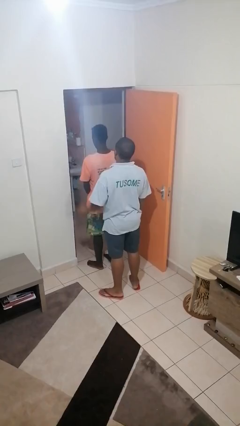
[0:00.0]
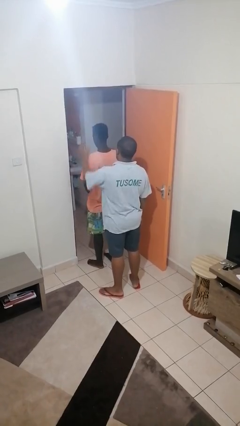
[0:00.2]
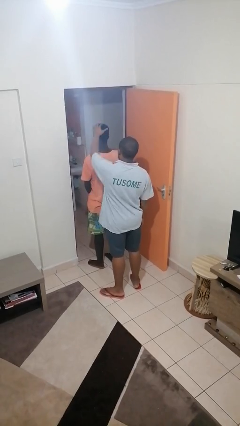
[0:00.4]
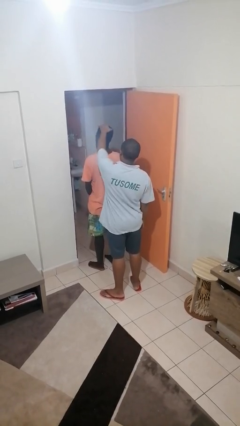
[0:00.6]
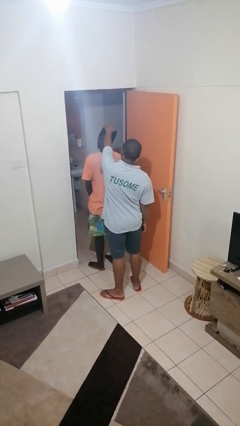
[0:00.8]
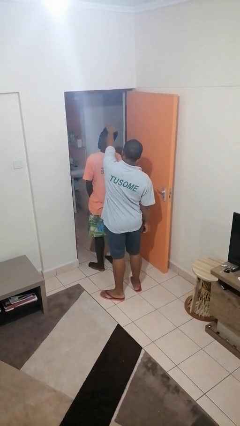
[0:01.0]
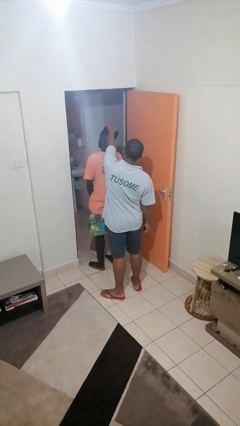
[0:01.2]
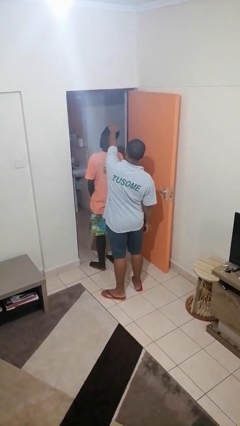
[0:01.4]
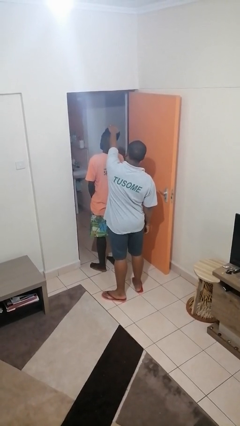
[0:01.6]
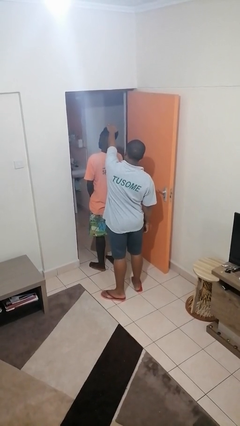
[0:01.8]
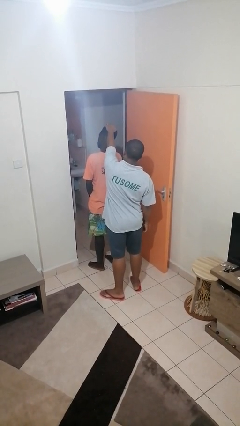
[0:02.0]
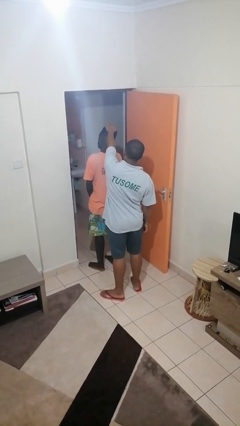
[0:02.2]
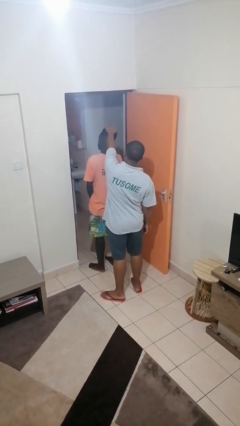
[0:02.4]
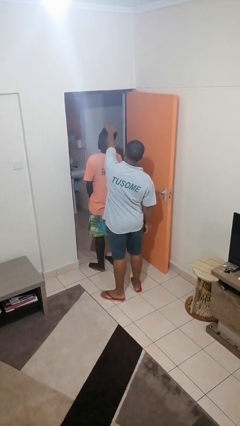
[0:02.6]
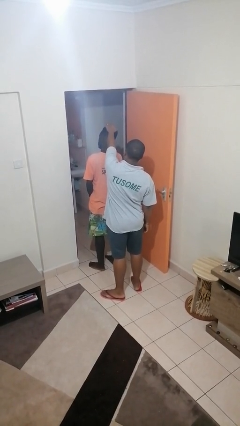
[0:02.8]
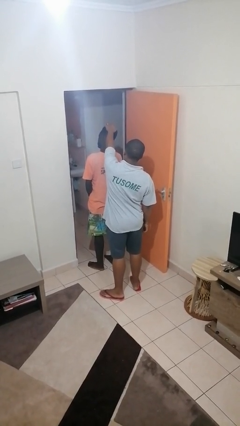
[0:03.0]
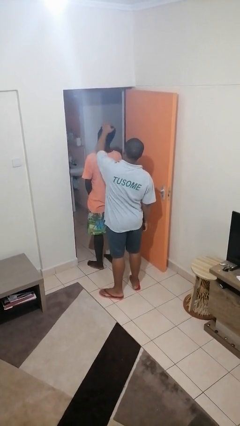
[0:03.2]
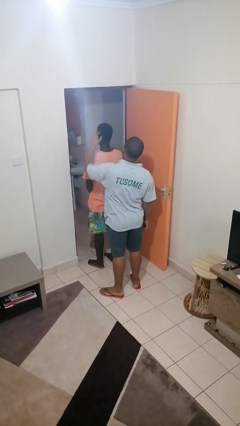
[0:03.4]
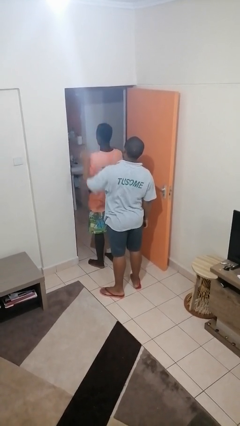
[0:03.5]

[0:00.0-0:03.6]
person grabs person by hair

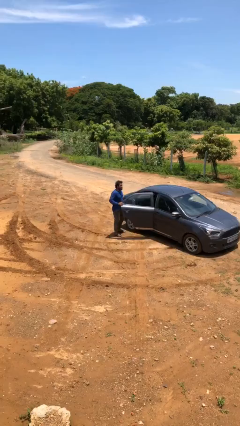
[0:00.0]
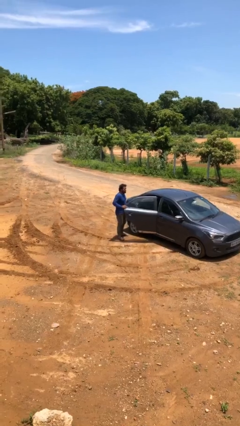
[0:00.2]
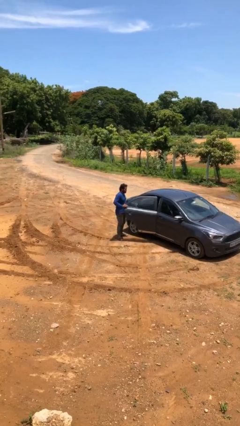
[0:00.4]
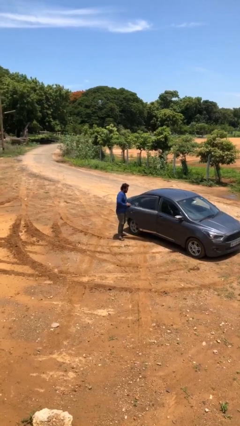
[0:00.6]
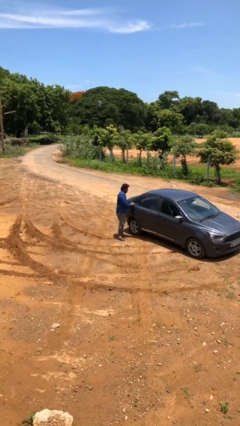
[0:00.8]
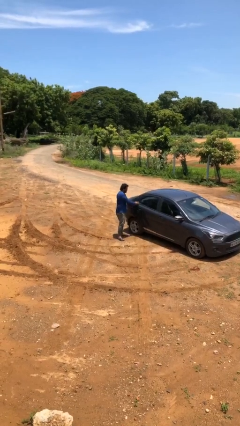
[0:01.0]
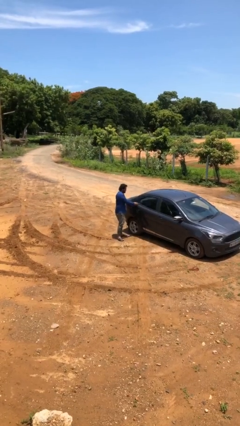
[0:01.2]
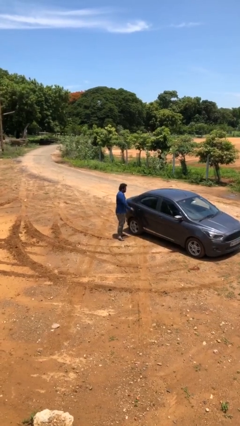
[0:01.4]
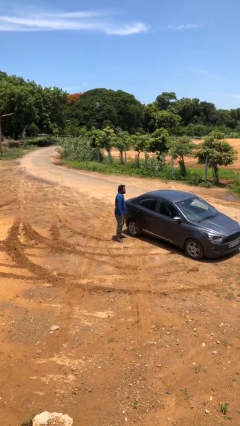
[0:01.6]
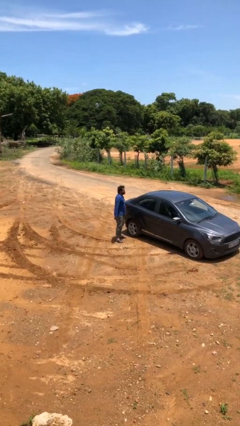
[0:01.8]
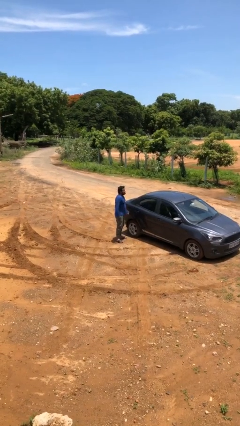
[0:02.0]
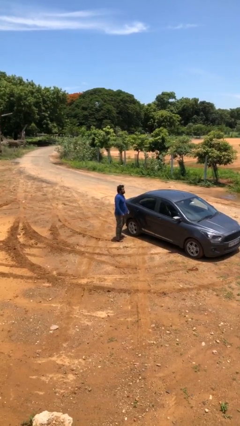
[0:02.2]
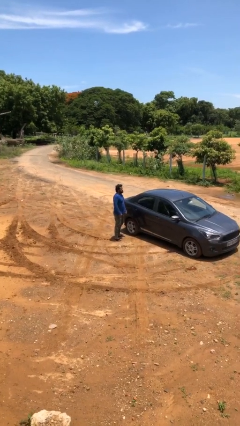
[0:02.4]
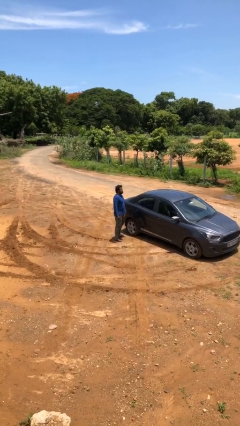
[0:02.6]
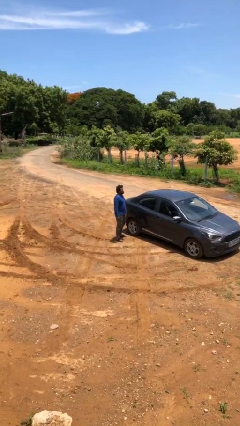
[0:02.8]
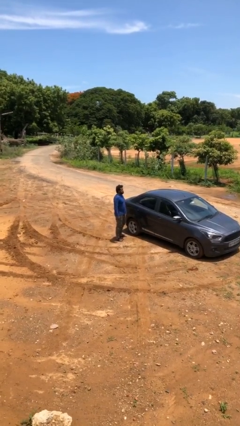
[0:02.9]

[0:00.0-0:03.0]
person closes car door

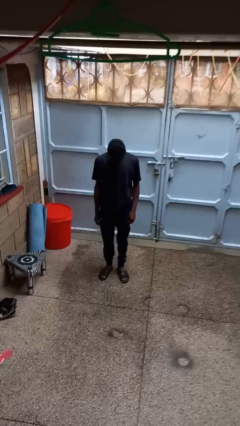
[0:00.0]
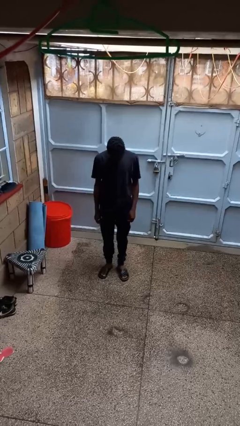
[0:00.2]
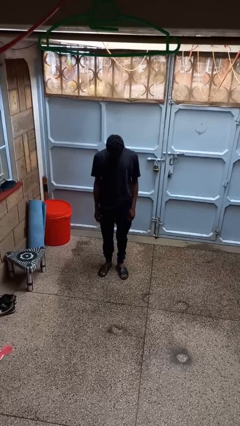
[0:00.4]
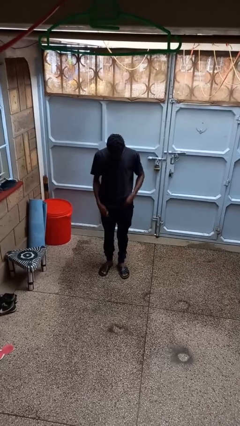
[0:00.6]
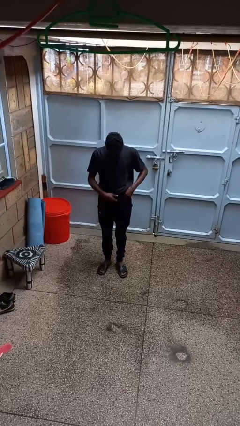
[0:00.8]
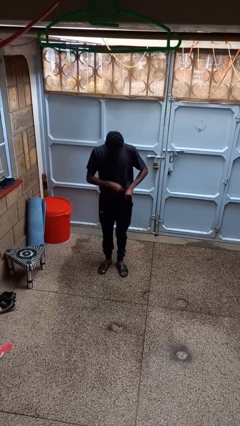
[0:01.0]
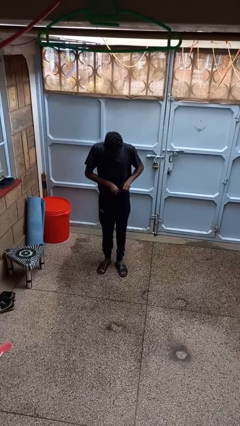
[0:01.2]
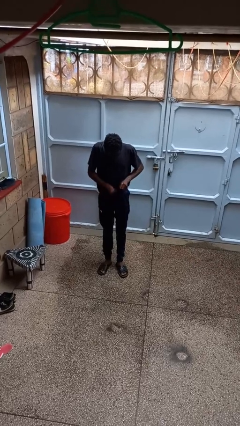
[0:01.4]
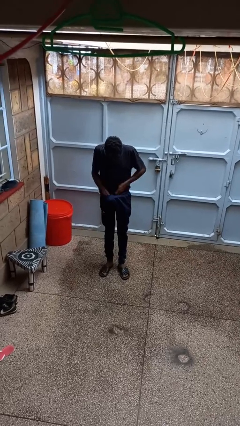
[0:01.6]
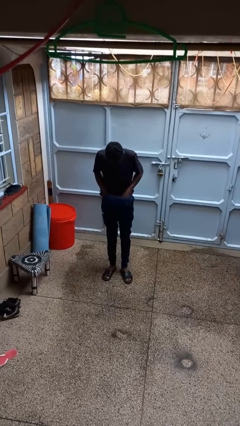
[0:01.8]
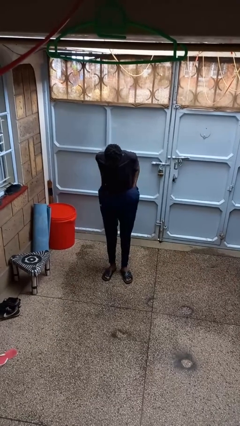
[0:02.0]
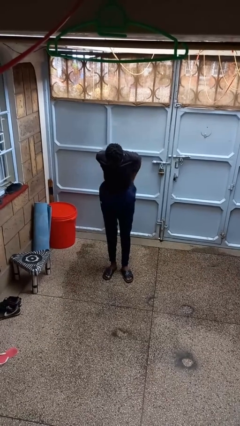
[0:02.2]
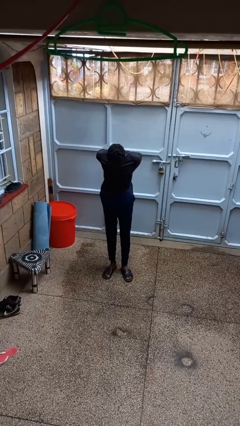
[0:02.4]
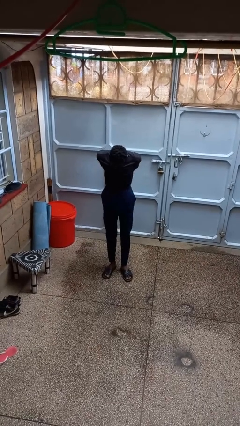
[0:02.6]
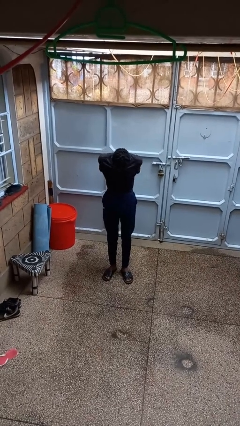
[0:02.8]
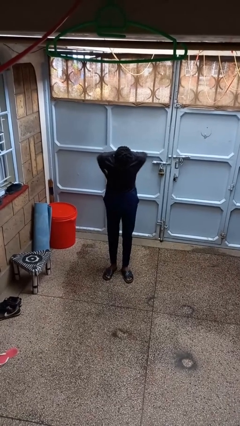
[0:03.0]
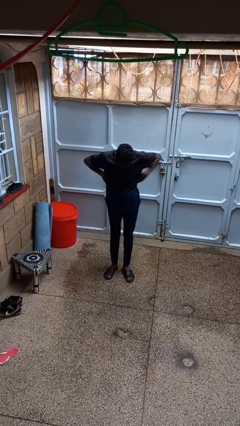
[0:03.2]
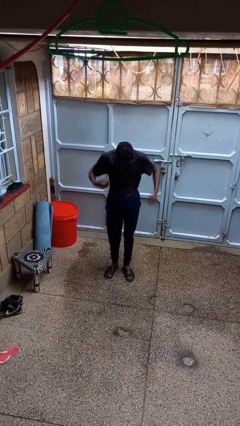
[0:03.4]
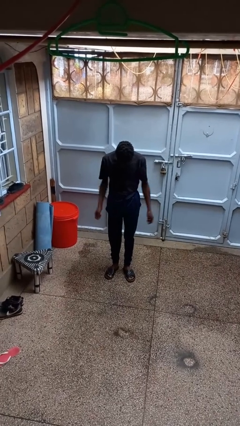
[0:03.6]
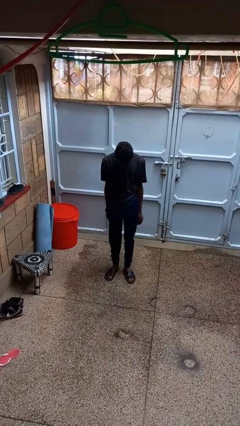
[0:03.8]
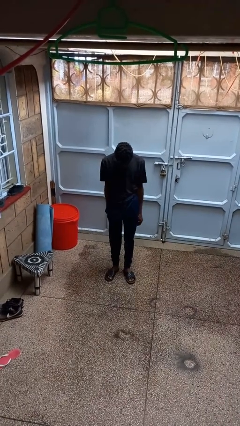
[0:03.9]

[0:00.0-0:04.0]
person tucks in shirt

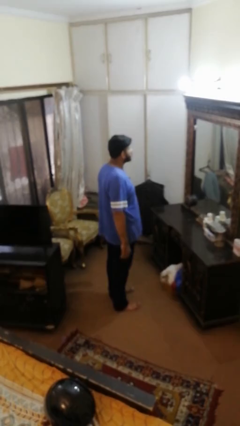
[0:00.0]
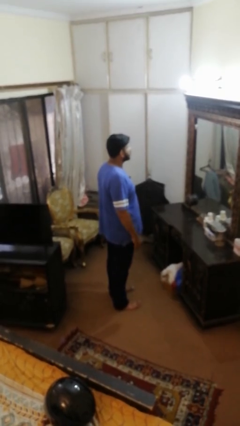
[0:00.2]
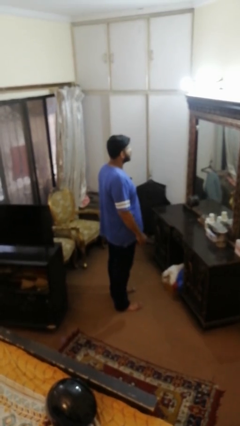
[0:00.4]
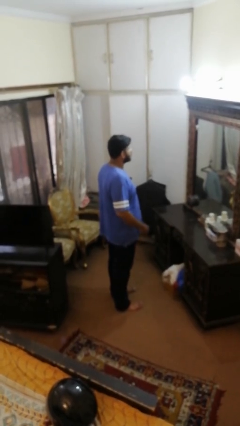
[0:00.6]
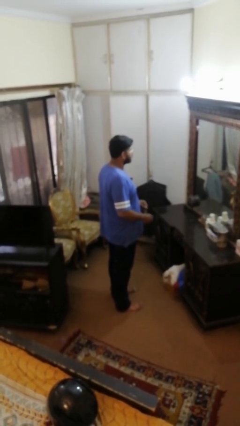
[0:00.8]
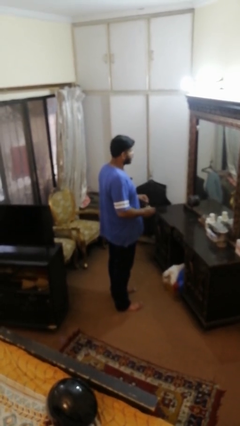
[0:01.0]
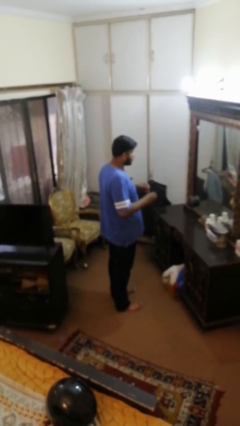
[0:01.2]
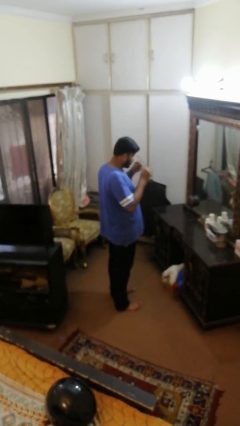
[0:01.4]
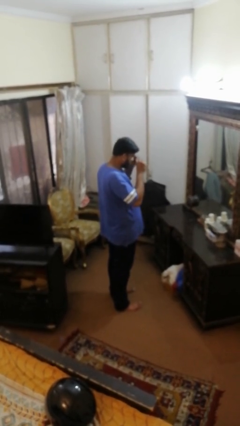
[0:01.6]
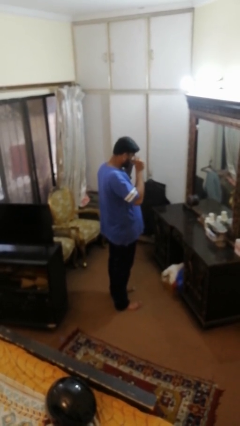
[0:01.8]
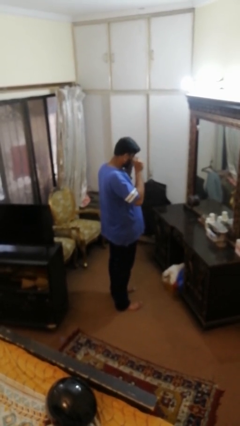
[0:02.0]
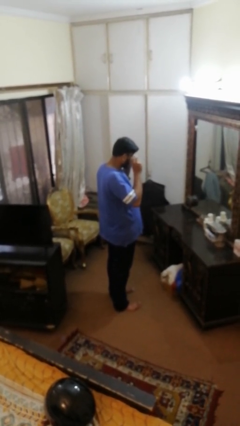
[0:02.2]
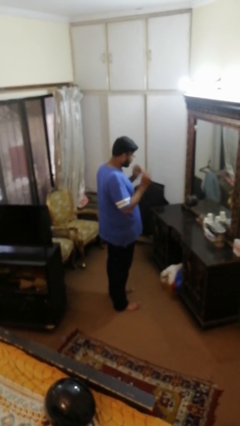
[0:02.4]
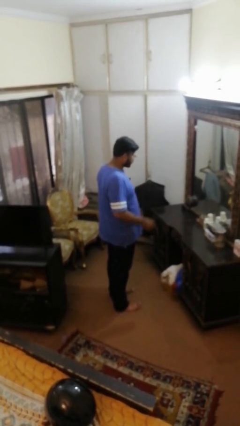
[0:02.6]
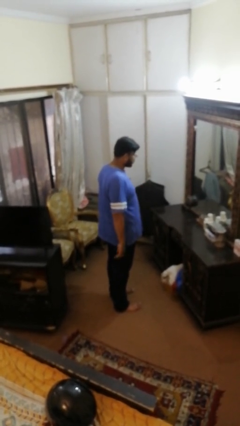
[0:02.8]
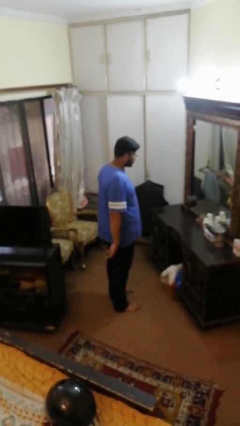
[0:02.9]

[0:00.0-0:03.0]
person puts on glasses

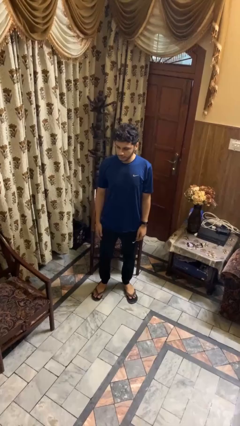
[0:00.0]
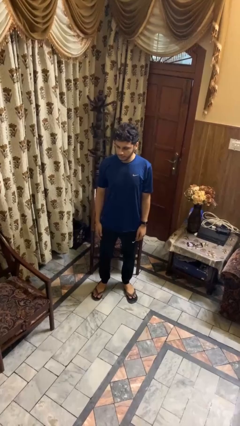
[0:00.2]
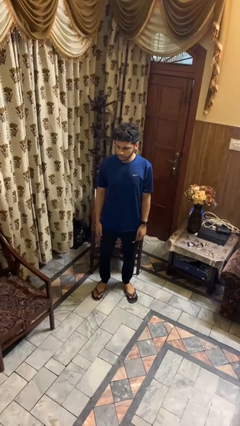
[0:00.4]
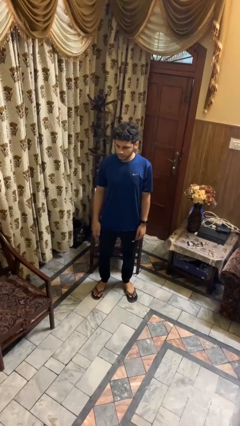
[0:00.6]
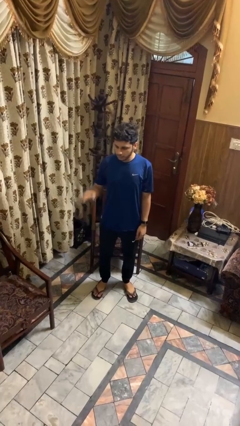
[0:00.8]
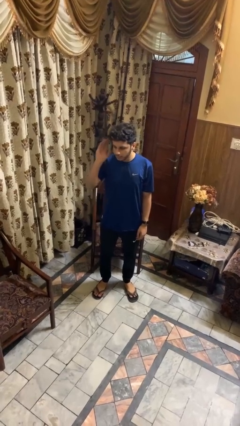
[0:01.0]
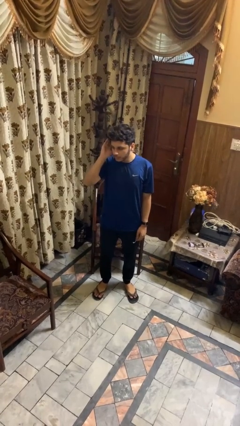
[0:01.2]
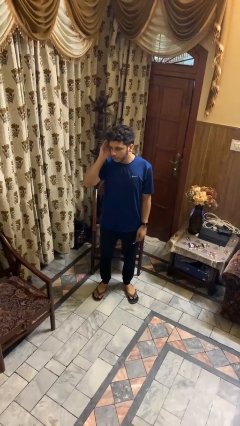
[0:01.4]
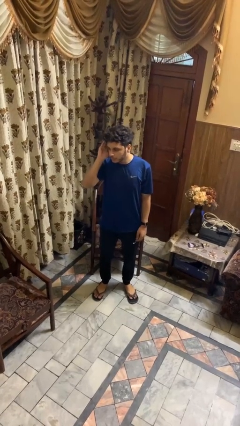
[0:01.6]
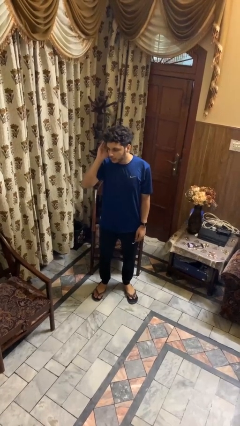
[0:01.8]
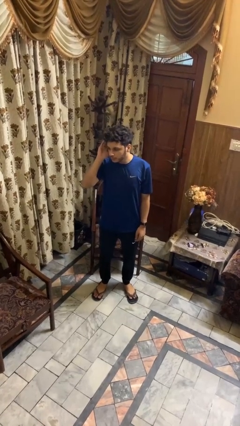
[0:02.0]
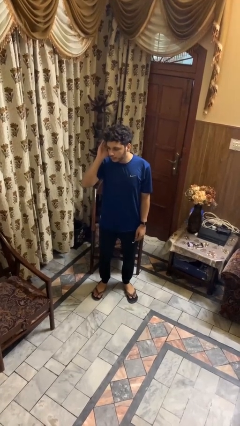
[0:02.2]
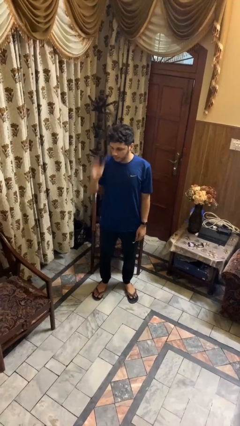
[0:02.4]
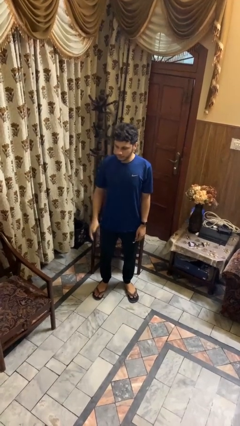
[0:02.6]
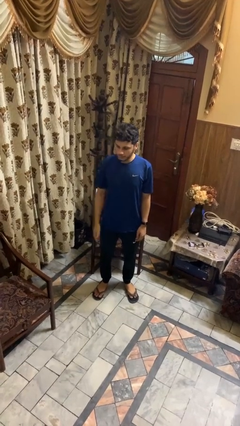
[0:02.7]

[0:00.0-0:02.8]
person gestures listen closely

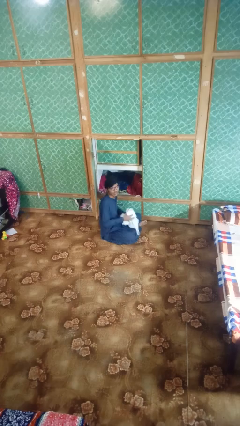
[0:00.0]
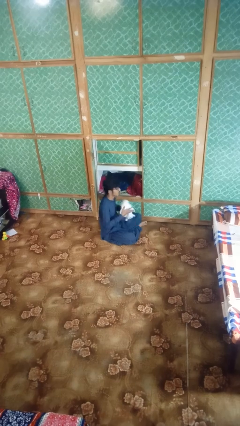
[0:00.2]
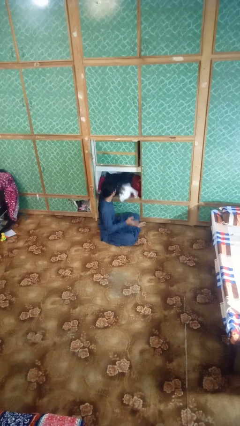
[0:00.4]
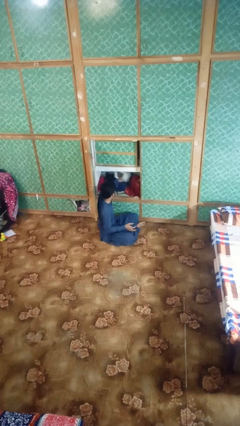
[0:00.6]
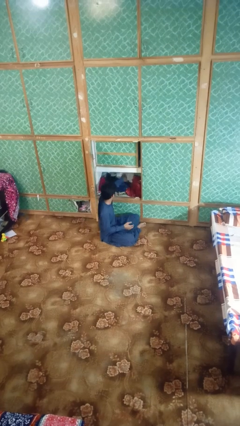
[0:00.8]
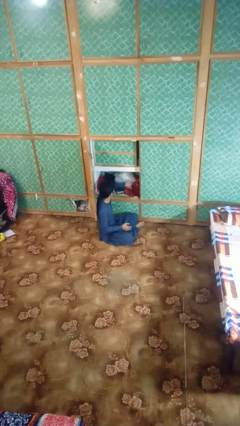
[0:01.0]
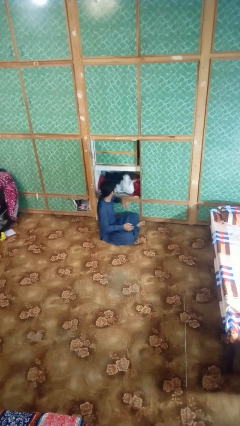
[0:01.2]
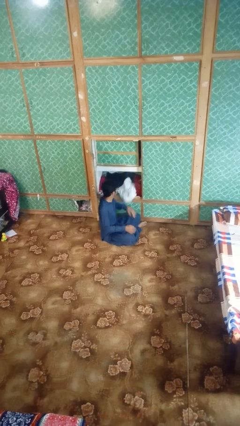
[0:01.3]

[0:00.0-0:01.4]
person puts clothes into dresser
